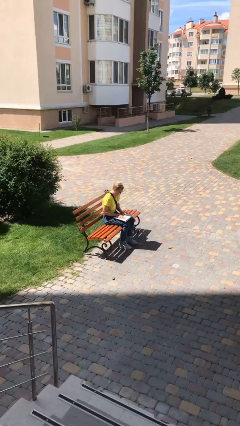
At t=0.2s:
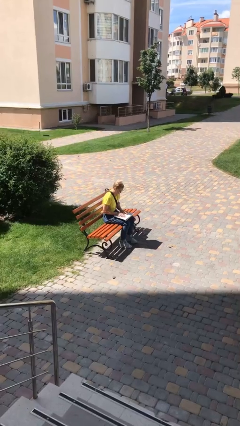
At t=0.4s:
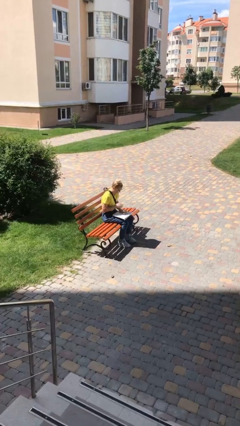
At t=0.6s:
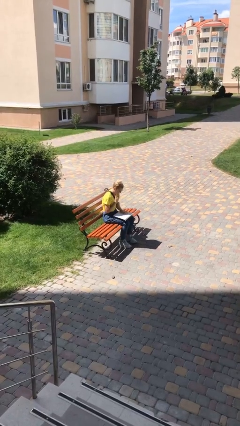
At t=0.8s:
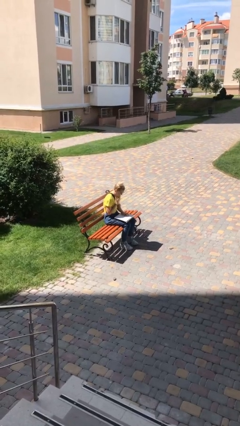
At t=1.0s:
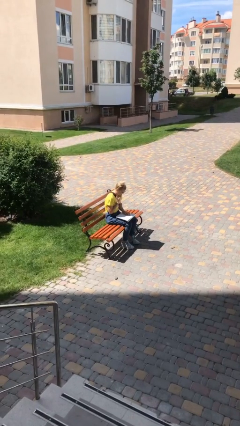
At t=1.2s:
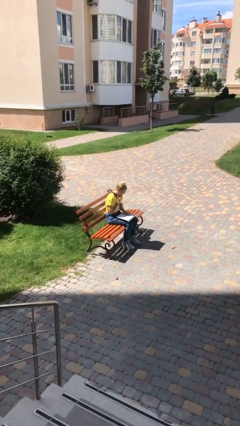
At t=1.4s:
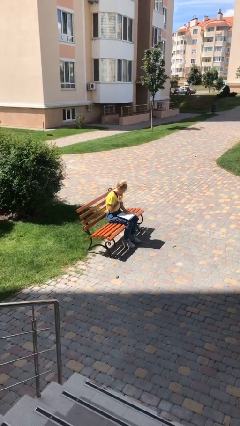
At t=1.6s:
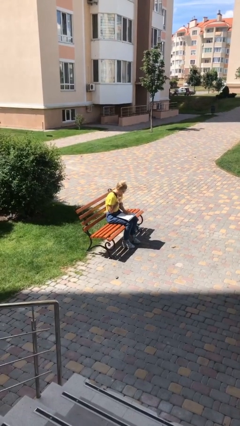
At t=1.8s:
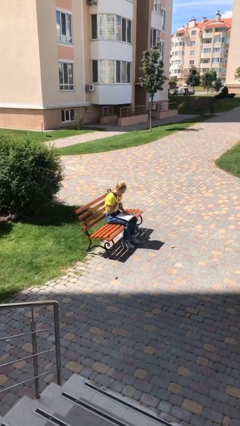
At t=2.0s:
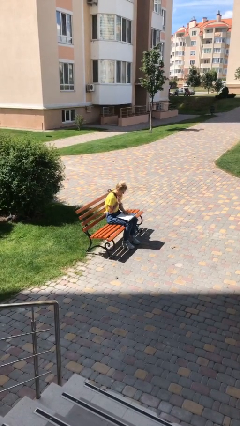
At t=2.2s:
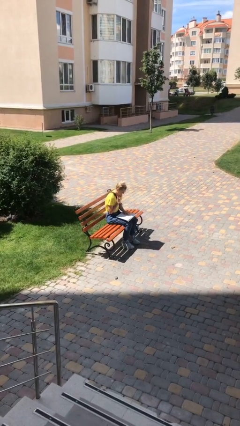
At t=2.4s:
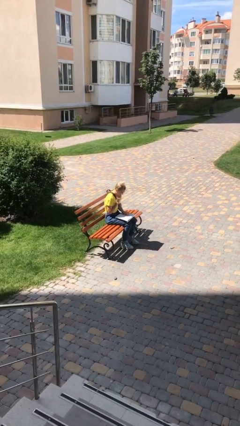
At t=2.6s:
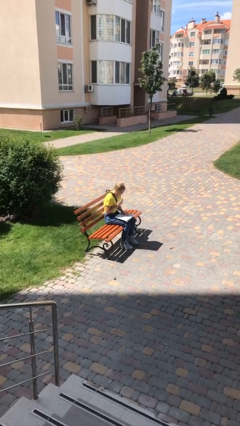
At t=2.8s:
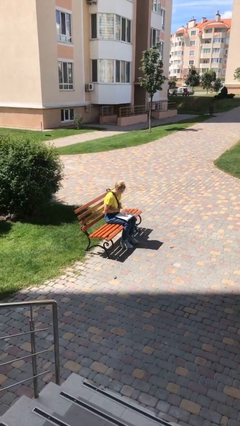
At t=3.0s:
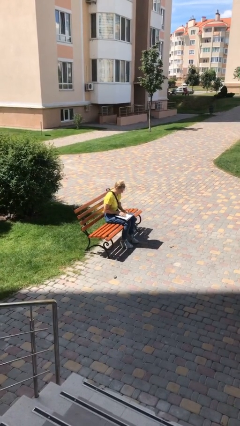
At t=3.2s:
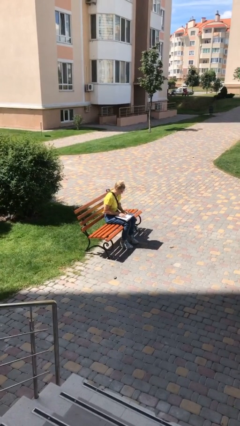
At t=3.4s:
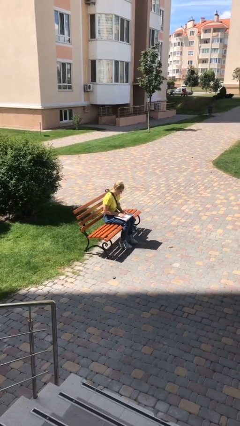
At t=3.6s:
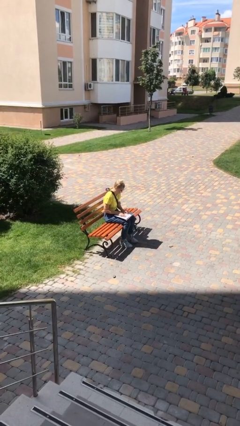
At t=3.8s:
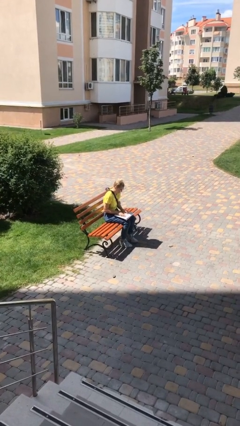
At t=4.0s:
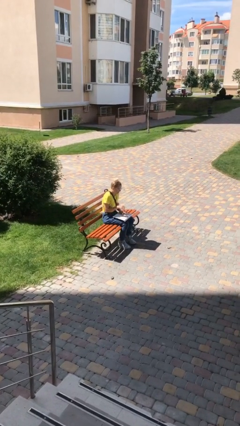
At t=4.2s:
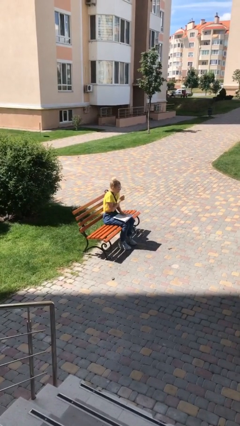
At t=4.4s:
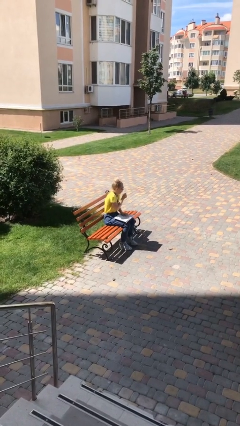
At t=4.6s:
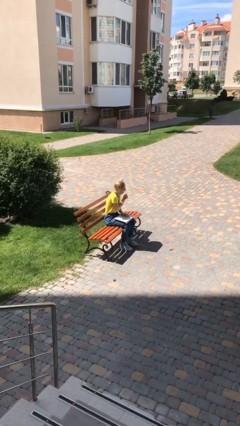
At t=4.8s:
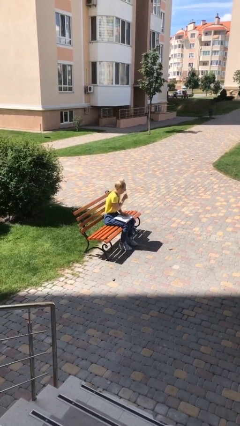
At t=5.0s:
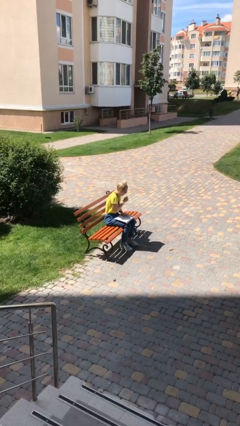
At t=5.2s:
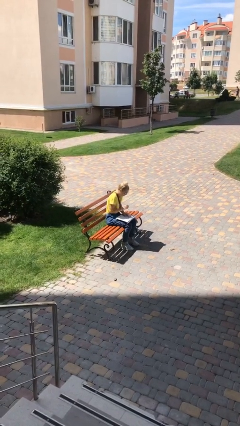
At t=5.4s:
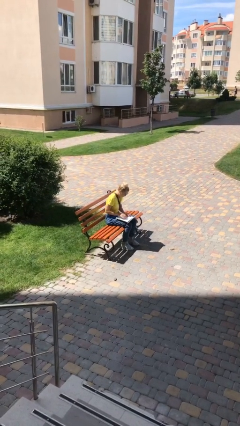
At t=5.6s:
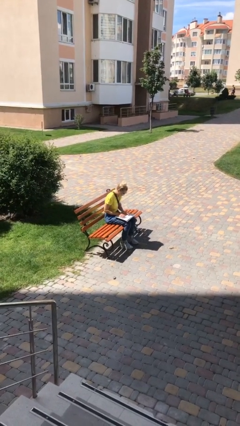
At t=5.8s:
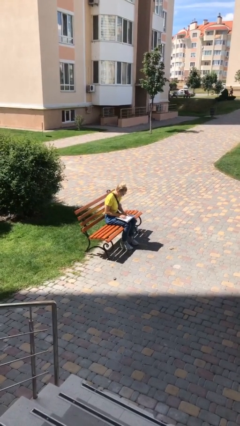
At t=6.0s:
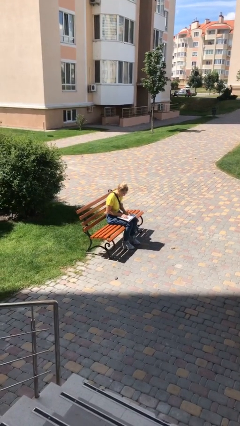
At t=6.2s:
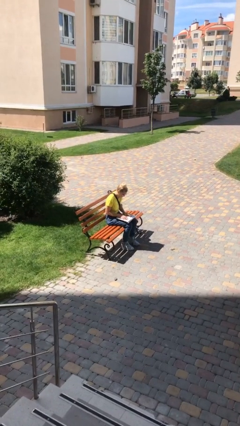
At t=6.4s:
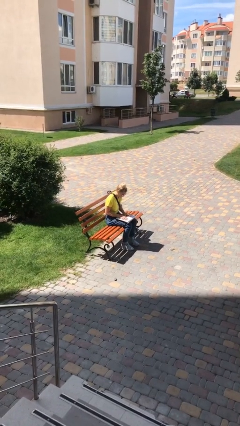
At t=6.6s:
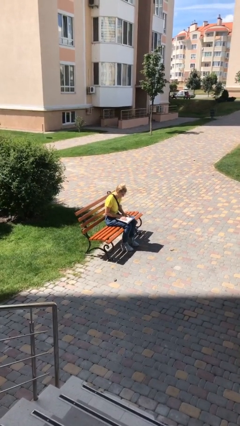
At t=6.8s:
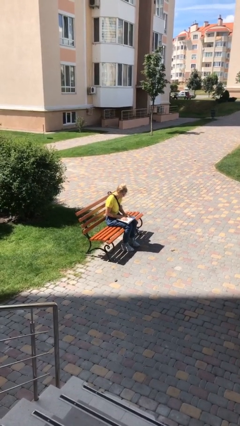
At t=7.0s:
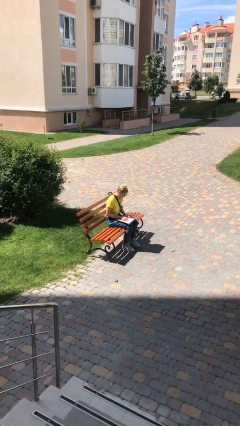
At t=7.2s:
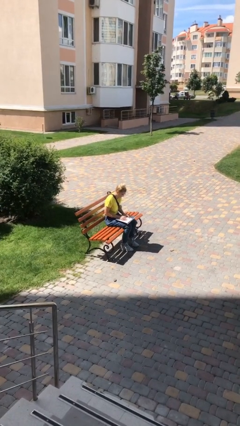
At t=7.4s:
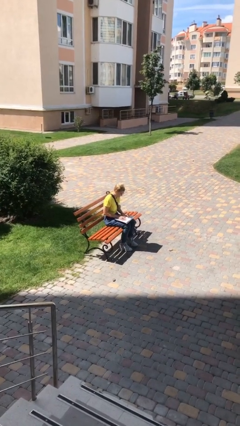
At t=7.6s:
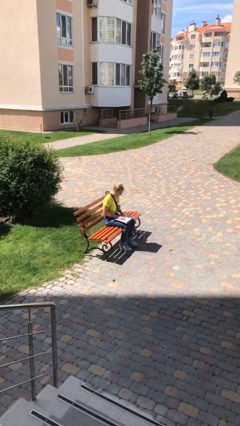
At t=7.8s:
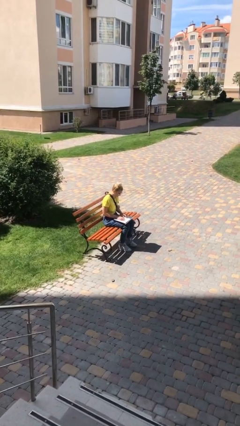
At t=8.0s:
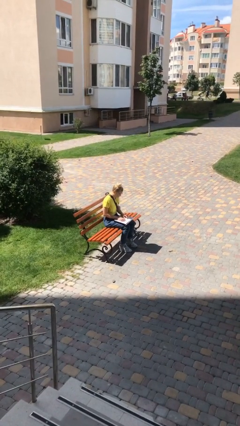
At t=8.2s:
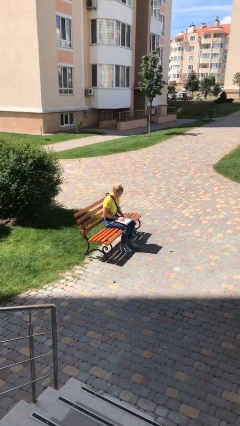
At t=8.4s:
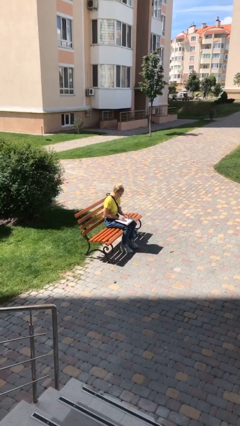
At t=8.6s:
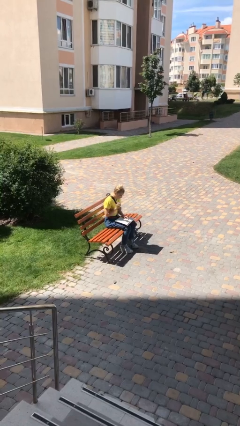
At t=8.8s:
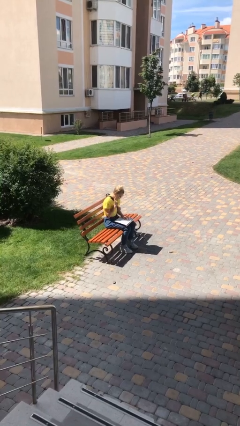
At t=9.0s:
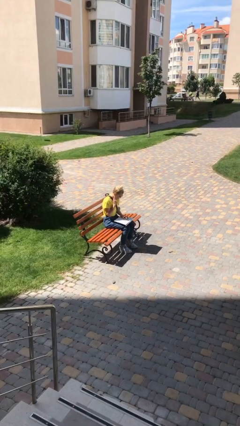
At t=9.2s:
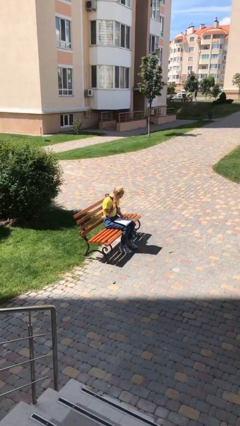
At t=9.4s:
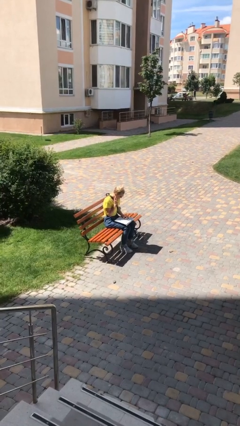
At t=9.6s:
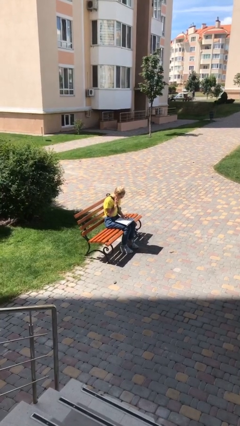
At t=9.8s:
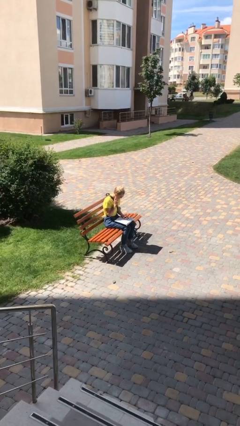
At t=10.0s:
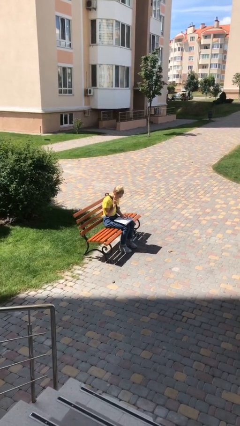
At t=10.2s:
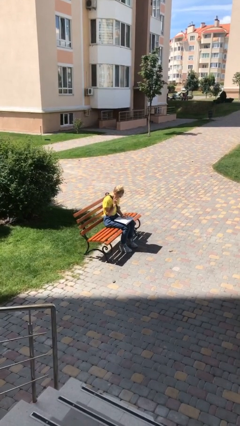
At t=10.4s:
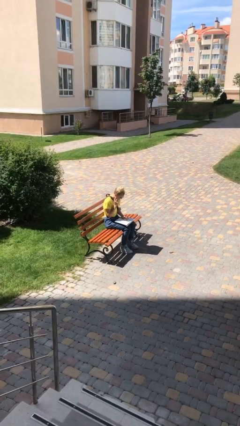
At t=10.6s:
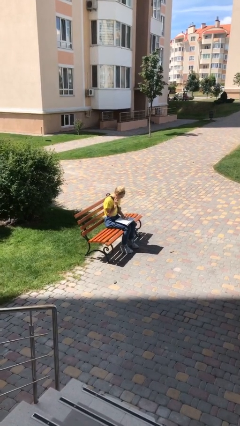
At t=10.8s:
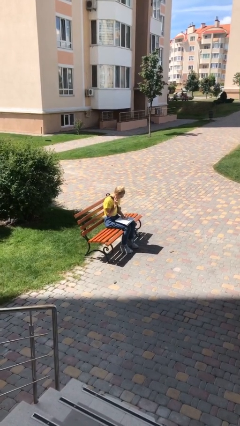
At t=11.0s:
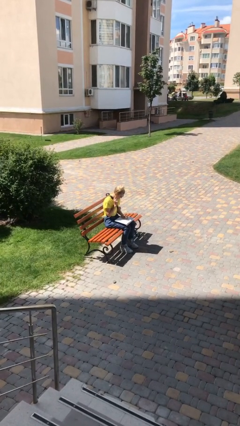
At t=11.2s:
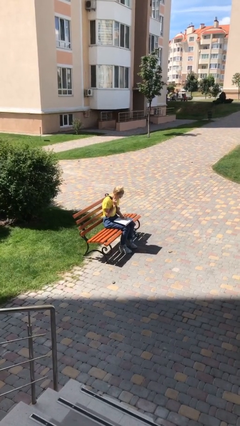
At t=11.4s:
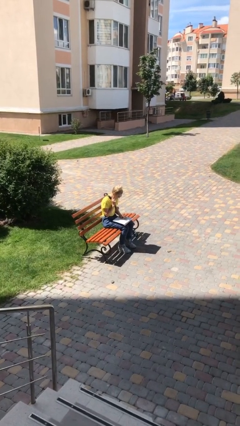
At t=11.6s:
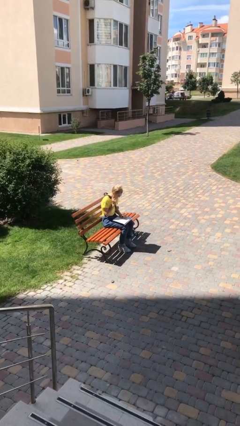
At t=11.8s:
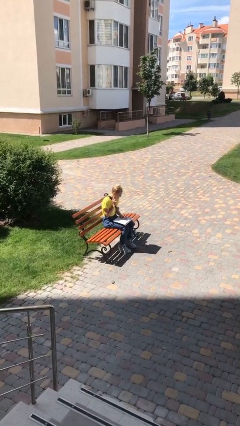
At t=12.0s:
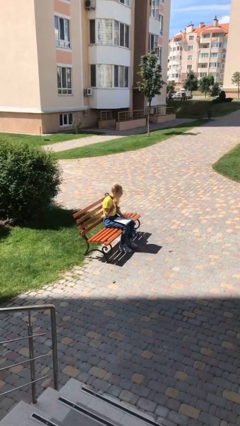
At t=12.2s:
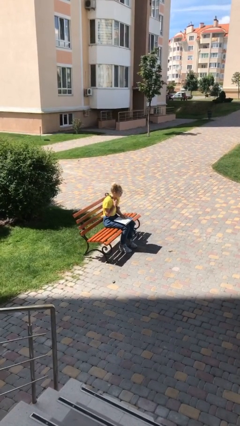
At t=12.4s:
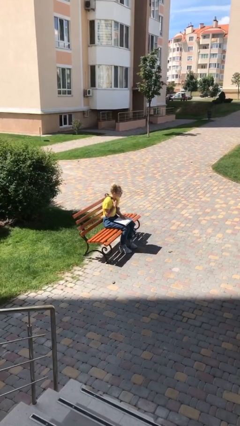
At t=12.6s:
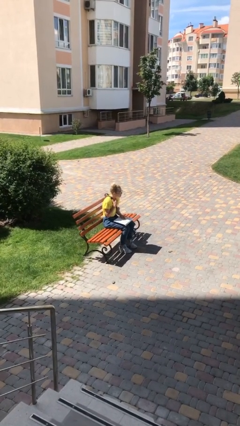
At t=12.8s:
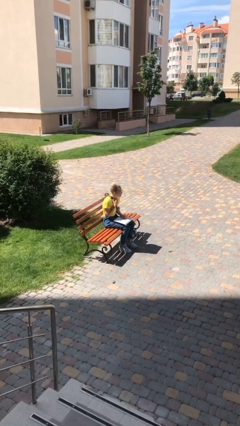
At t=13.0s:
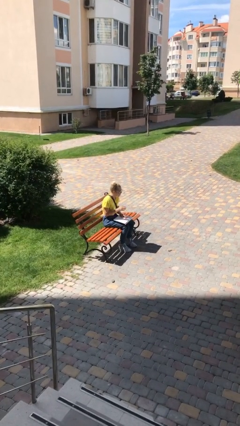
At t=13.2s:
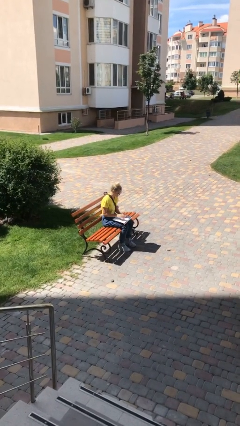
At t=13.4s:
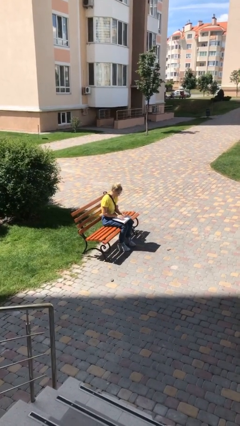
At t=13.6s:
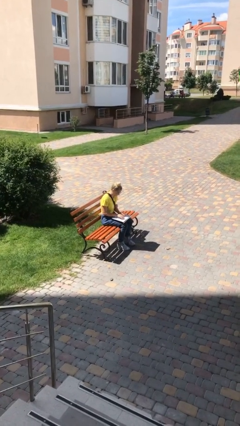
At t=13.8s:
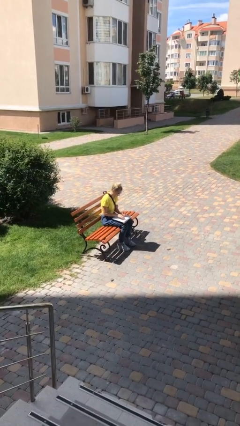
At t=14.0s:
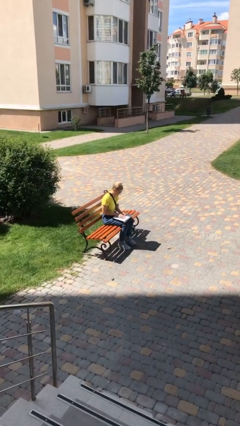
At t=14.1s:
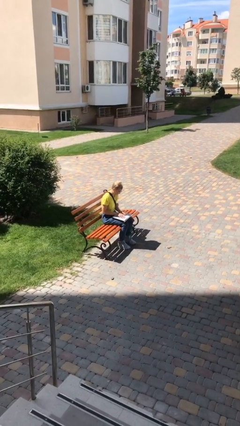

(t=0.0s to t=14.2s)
person interacts with laptop

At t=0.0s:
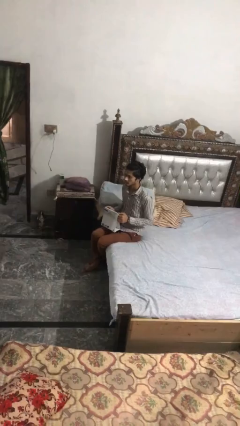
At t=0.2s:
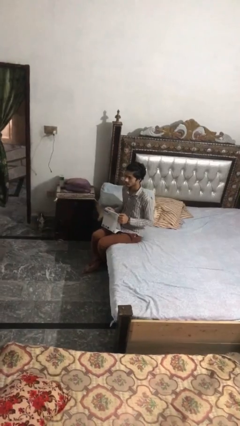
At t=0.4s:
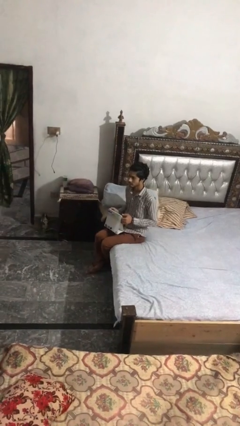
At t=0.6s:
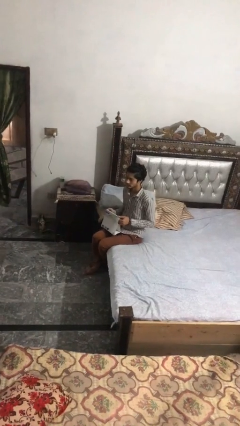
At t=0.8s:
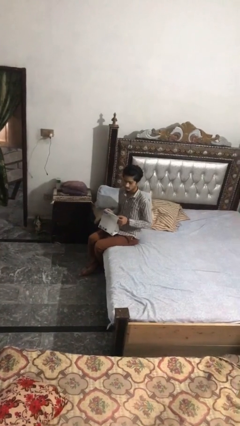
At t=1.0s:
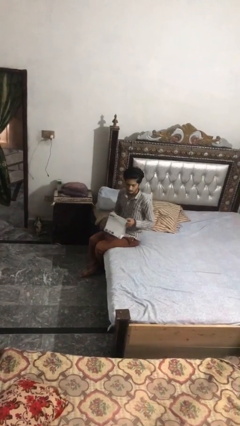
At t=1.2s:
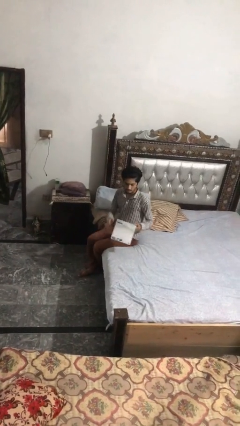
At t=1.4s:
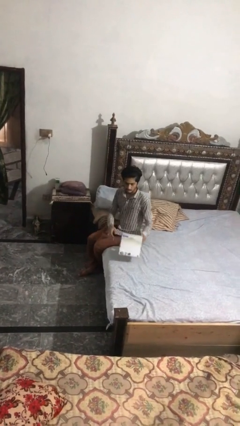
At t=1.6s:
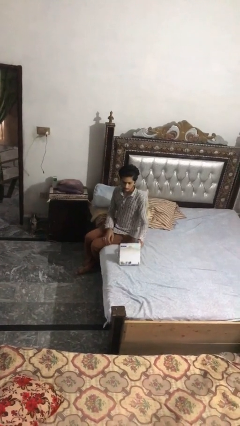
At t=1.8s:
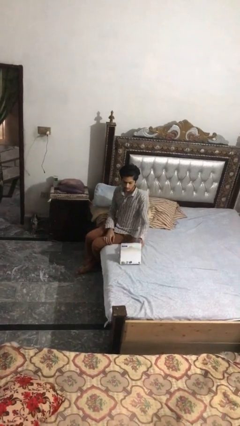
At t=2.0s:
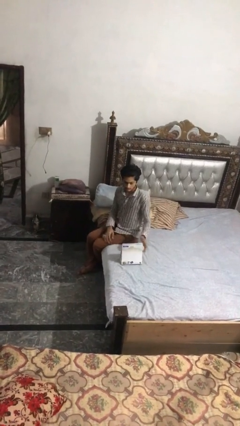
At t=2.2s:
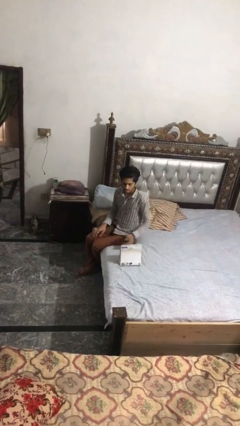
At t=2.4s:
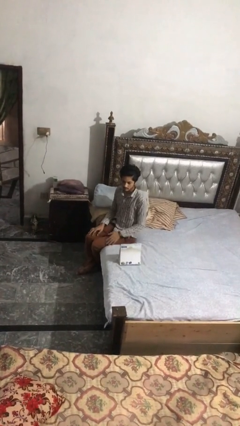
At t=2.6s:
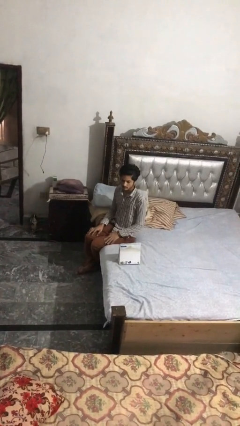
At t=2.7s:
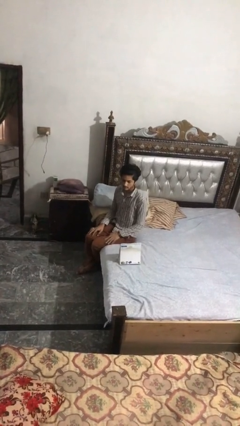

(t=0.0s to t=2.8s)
person puts down object on bed

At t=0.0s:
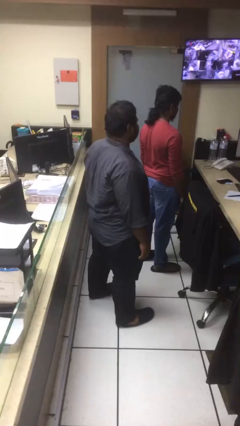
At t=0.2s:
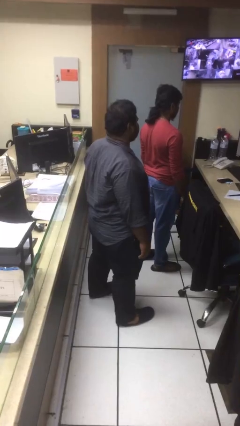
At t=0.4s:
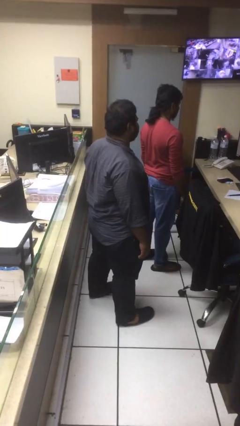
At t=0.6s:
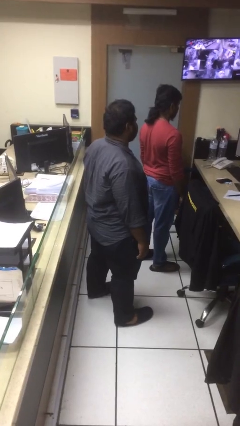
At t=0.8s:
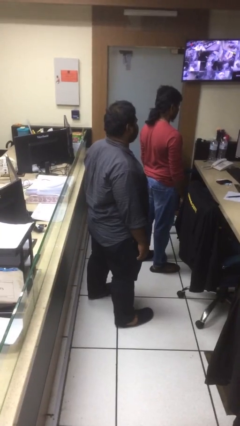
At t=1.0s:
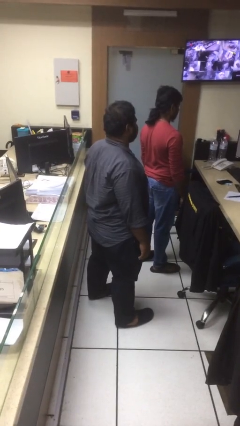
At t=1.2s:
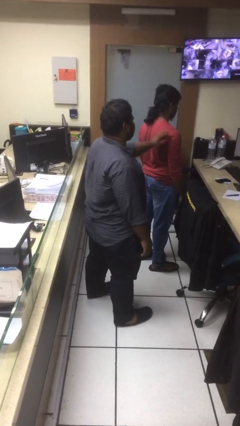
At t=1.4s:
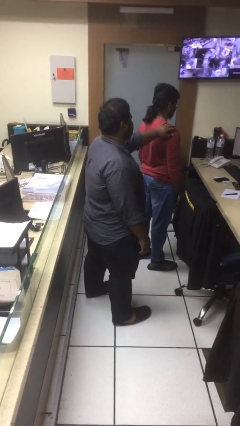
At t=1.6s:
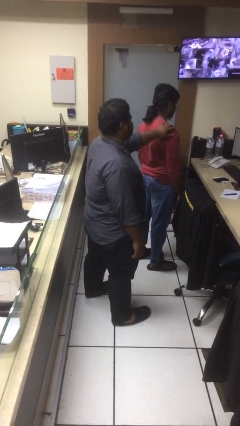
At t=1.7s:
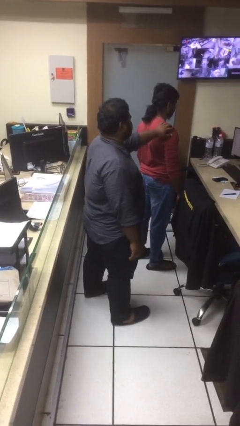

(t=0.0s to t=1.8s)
person grabs person by shoulder
